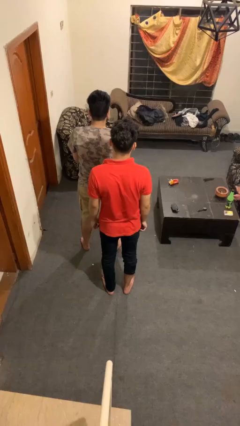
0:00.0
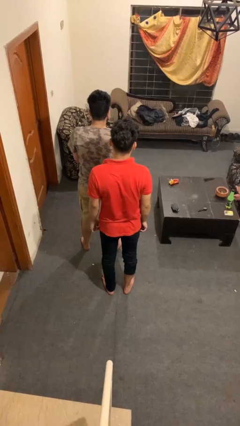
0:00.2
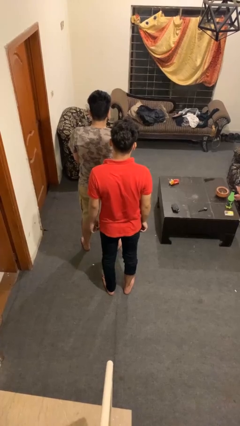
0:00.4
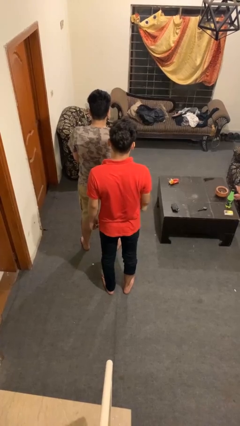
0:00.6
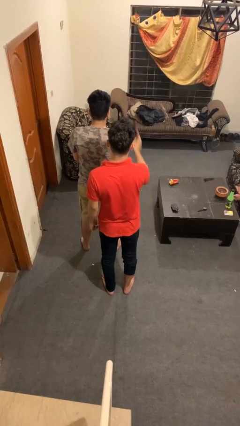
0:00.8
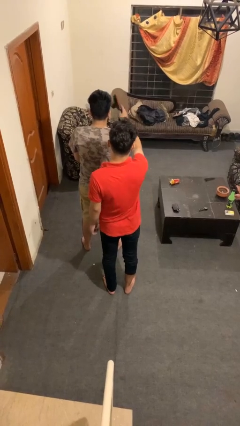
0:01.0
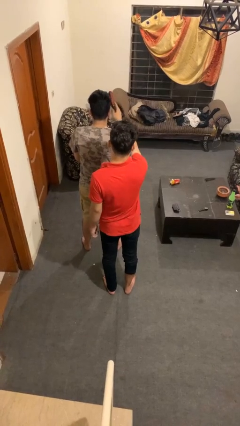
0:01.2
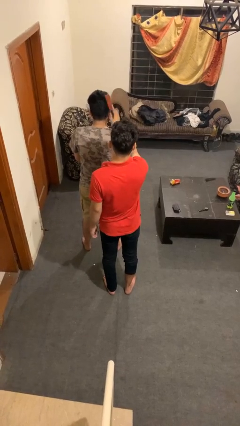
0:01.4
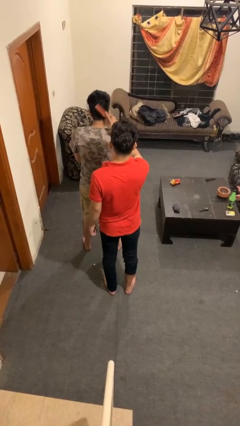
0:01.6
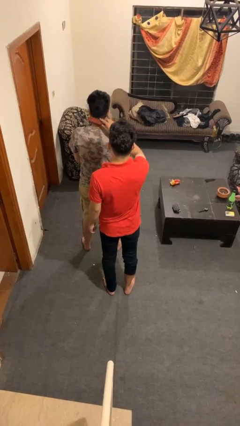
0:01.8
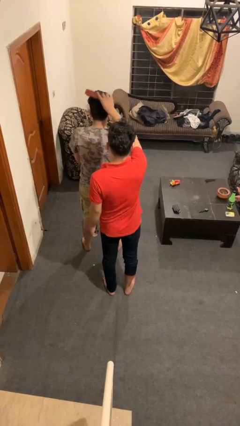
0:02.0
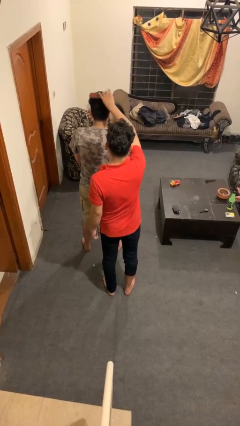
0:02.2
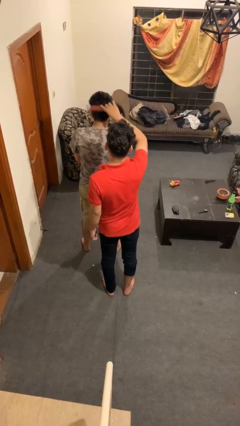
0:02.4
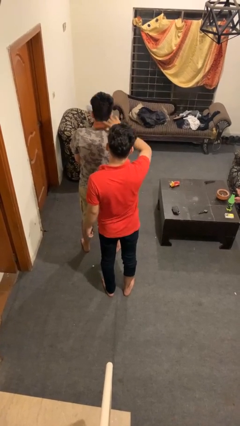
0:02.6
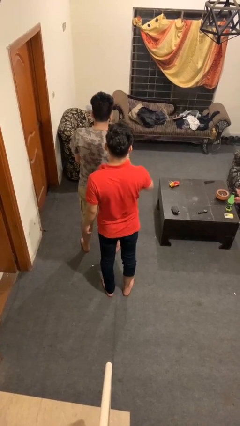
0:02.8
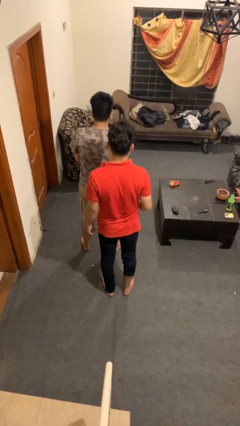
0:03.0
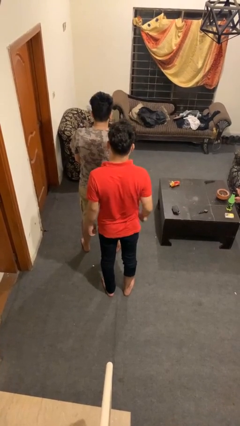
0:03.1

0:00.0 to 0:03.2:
person brushes hair of person

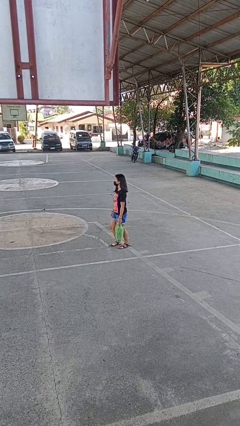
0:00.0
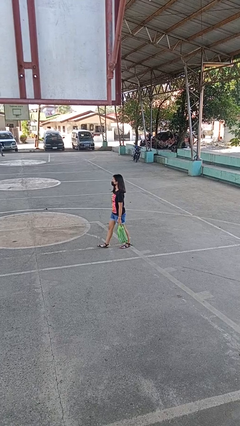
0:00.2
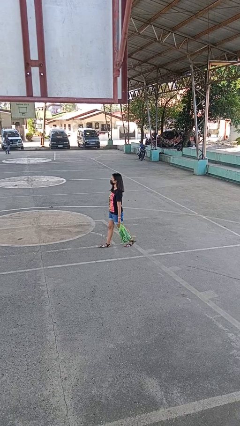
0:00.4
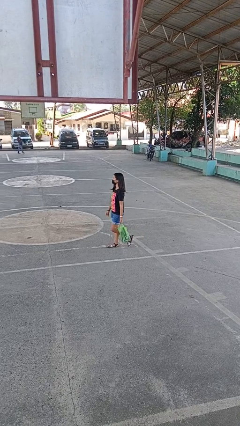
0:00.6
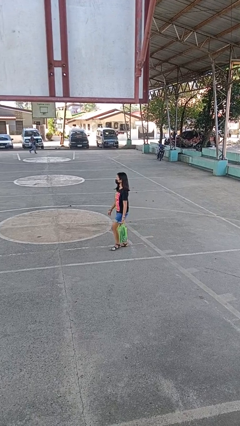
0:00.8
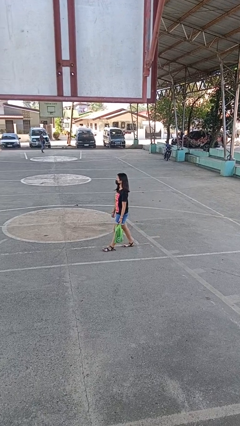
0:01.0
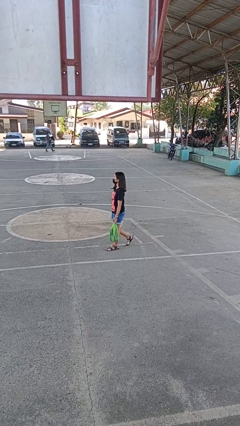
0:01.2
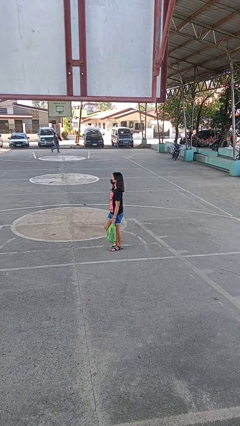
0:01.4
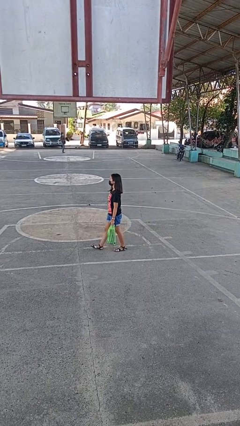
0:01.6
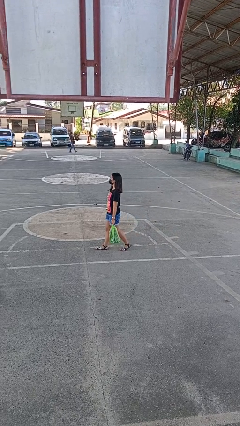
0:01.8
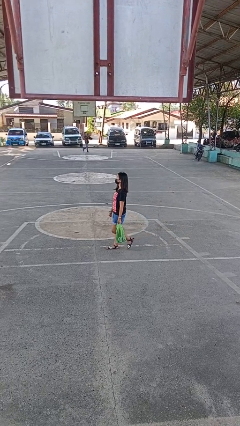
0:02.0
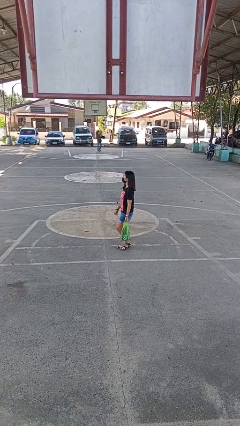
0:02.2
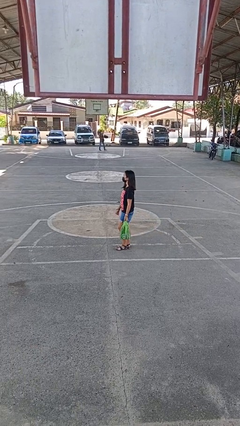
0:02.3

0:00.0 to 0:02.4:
person carries groceries

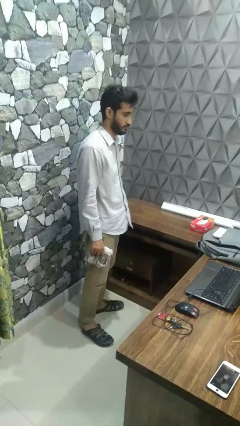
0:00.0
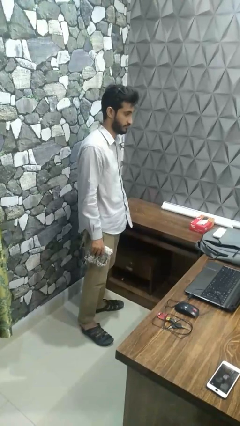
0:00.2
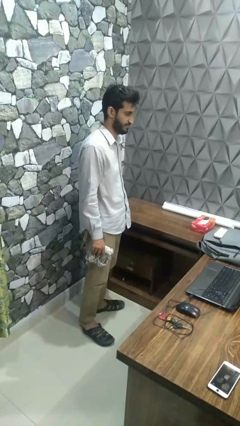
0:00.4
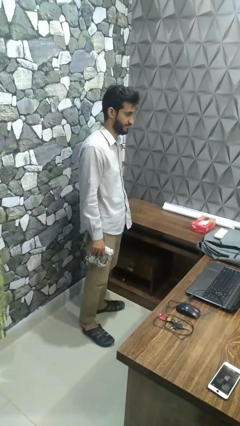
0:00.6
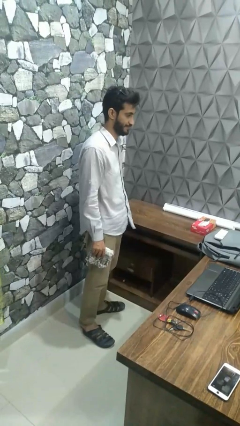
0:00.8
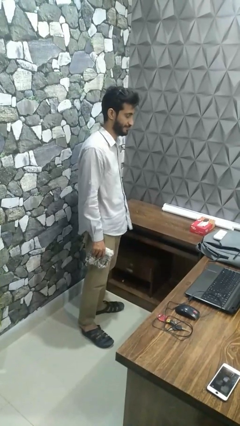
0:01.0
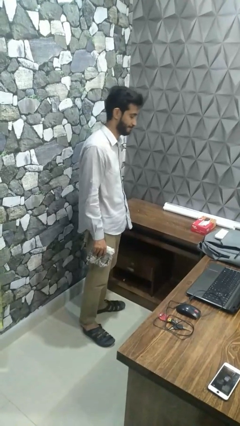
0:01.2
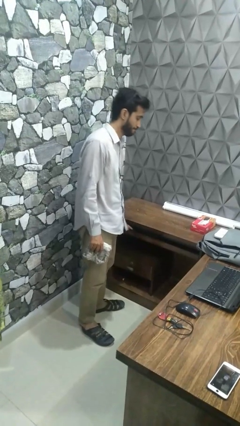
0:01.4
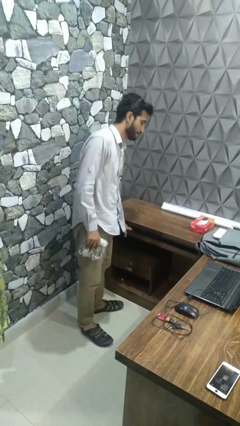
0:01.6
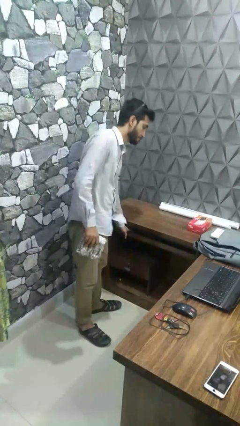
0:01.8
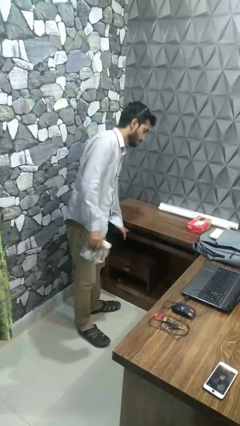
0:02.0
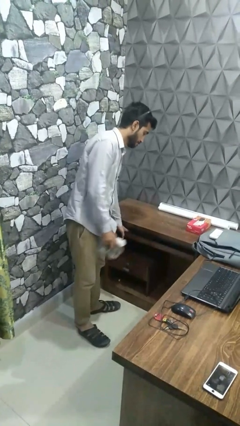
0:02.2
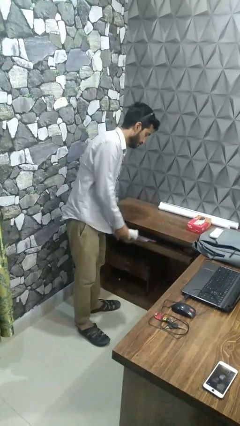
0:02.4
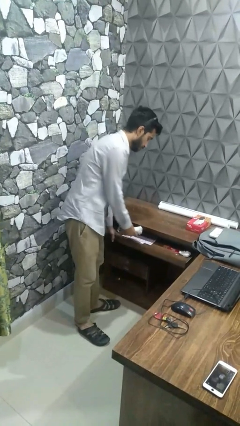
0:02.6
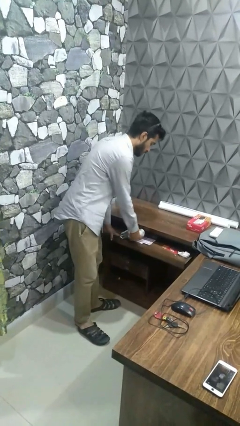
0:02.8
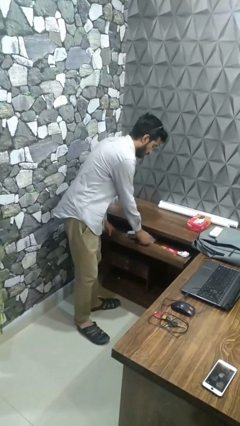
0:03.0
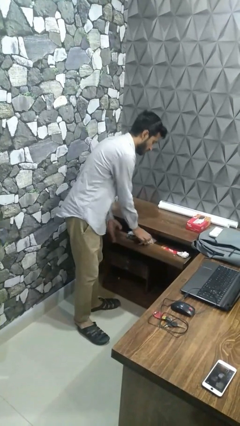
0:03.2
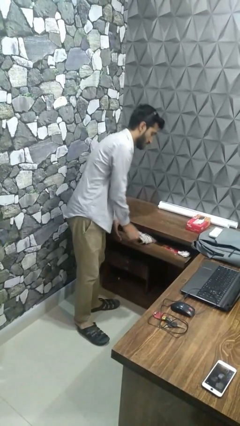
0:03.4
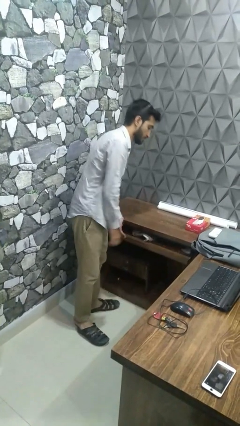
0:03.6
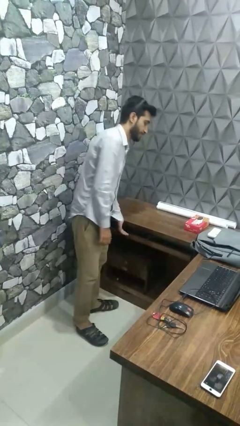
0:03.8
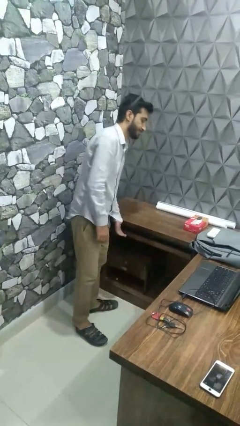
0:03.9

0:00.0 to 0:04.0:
person puts clothes into dresser

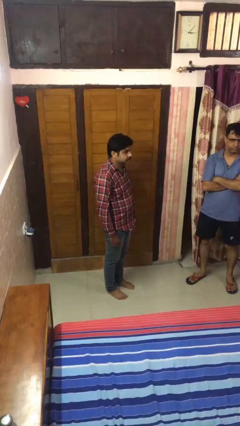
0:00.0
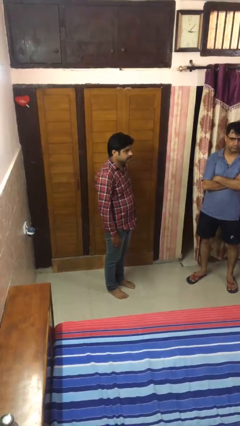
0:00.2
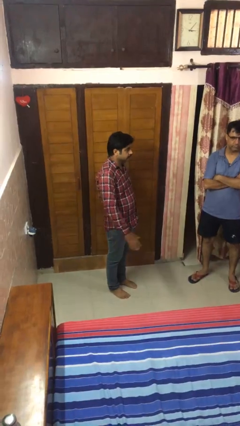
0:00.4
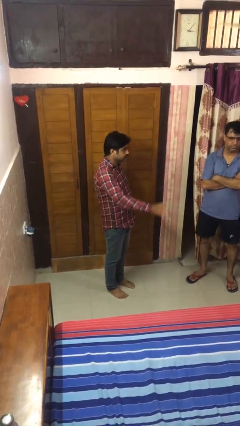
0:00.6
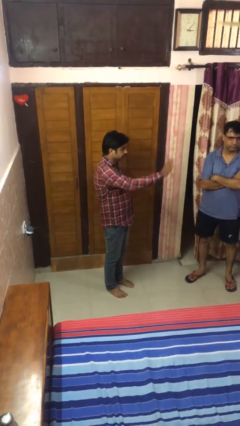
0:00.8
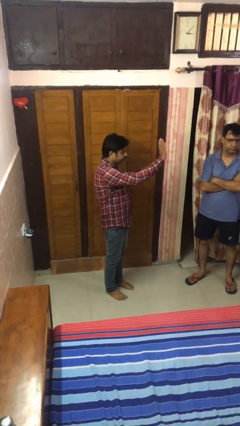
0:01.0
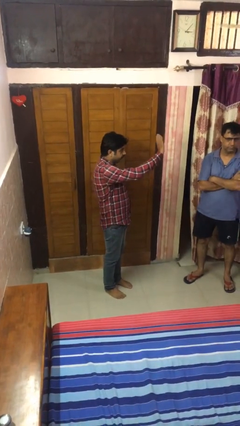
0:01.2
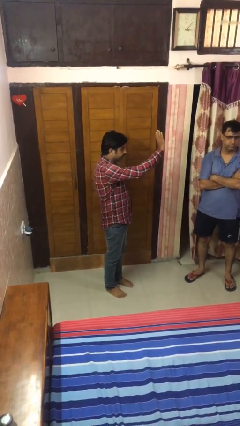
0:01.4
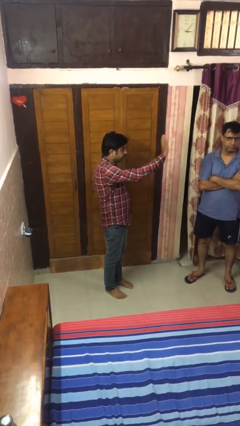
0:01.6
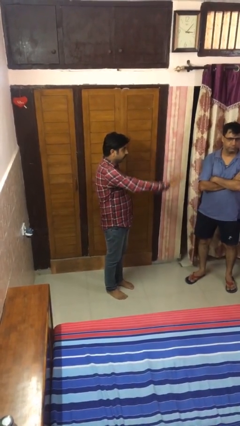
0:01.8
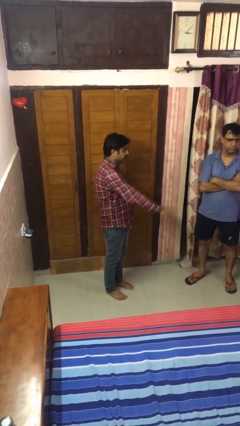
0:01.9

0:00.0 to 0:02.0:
person waves at person

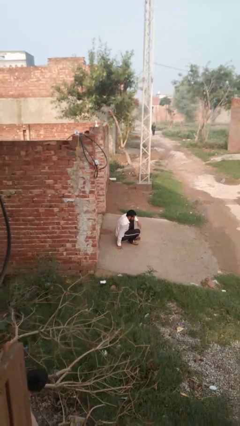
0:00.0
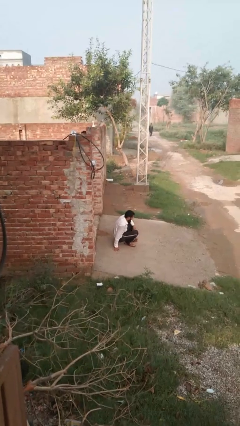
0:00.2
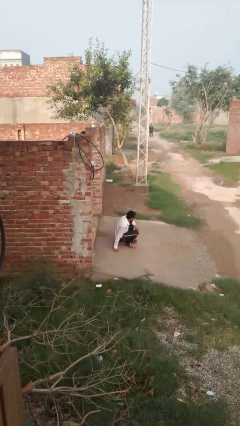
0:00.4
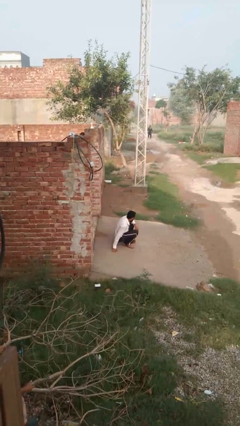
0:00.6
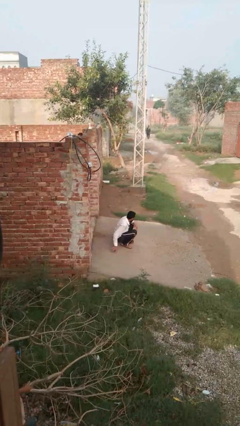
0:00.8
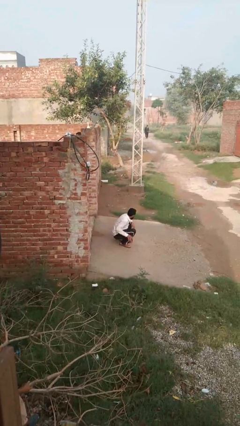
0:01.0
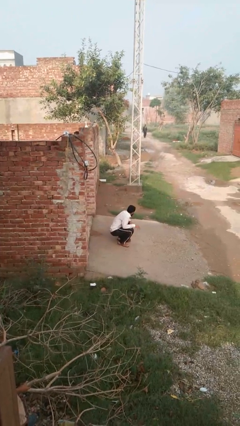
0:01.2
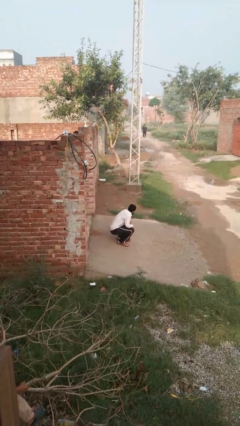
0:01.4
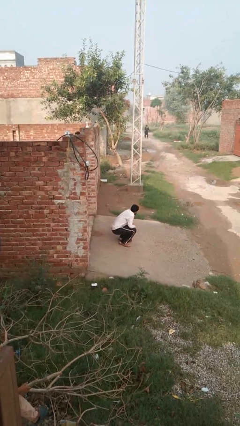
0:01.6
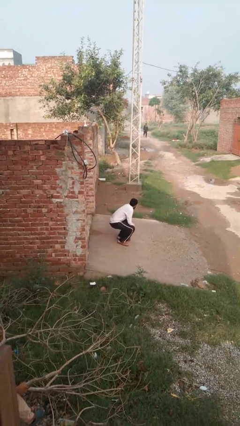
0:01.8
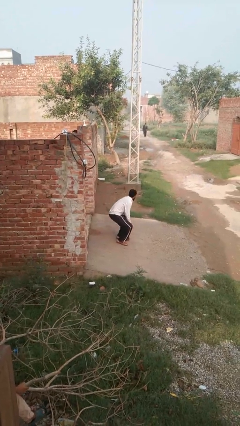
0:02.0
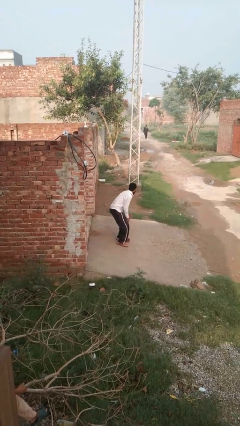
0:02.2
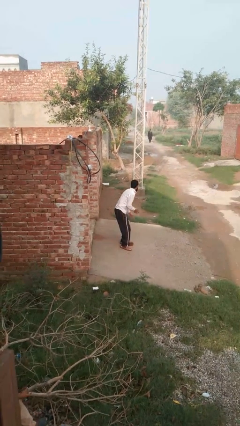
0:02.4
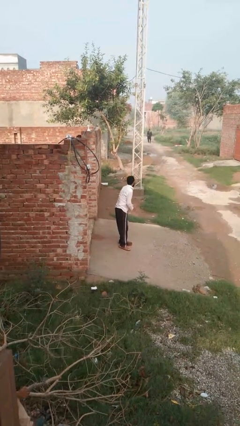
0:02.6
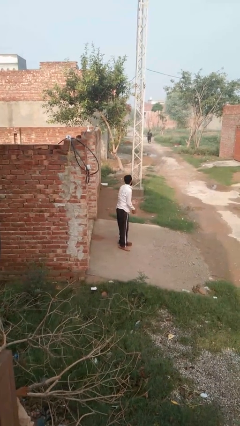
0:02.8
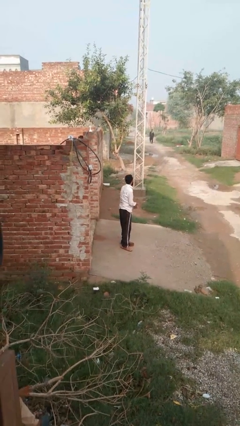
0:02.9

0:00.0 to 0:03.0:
person stands up from floor

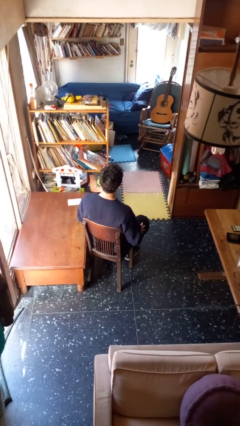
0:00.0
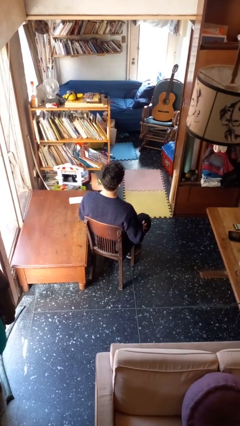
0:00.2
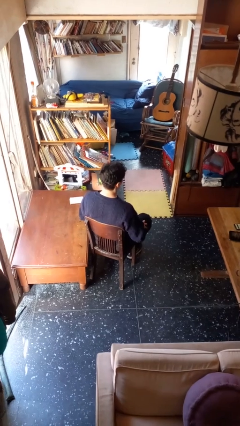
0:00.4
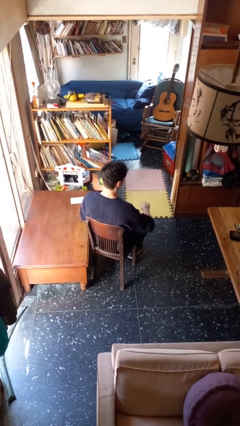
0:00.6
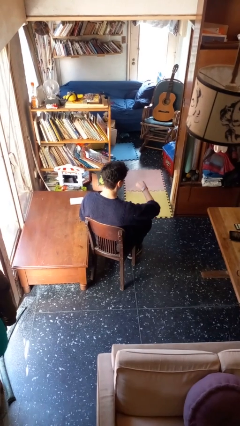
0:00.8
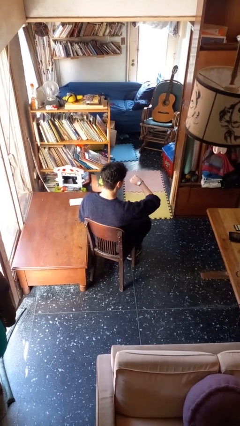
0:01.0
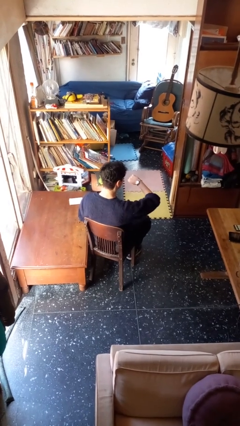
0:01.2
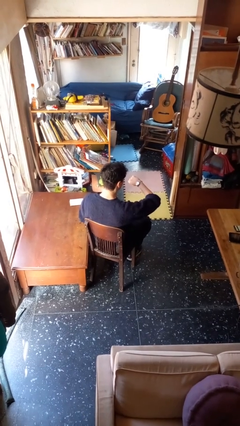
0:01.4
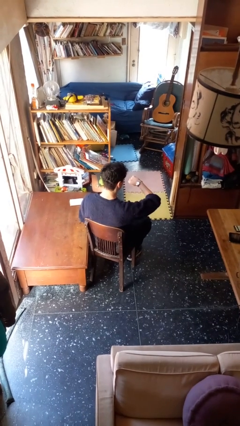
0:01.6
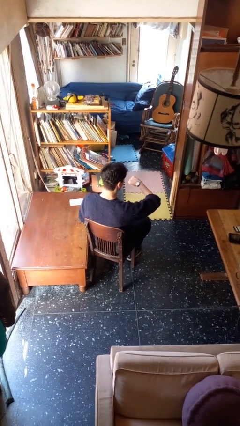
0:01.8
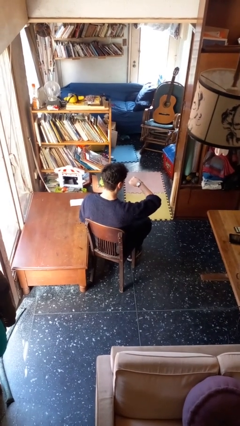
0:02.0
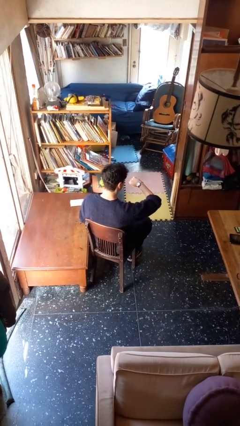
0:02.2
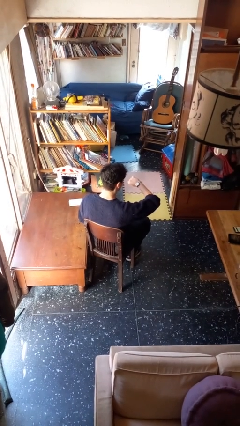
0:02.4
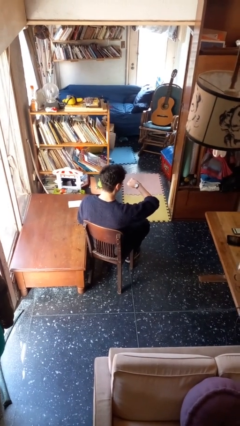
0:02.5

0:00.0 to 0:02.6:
person looks at wristwatch
